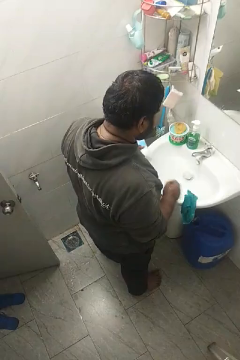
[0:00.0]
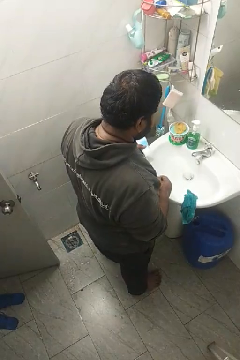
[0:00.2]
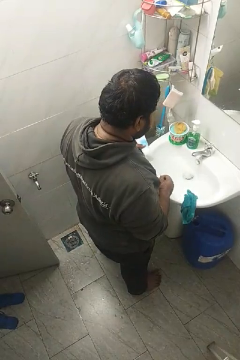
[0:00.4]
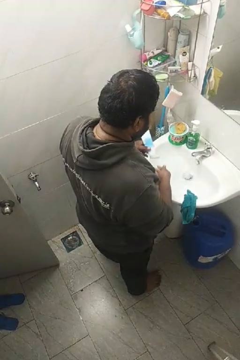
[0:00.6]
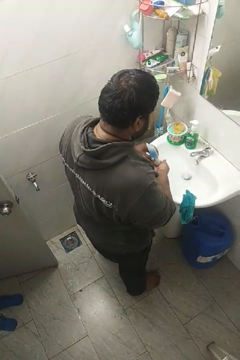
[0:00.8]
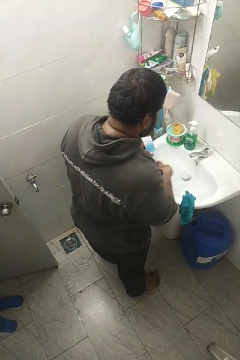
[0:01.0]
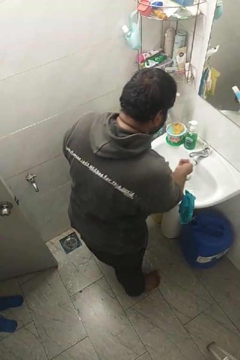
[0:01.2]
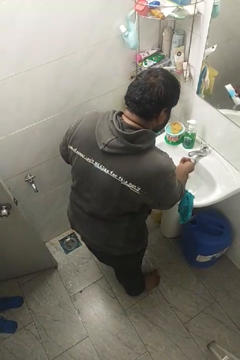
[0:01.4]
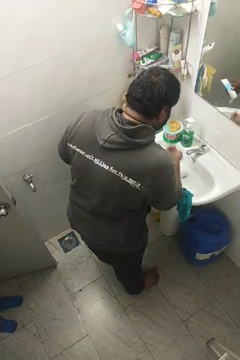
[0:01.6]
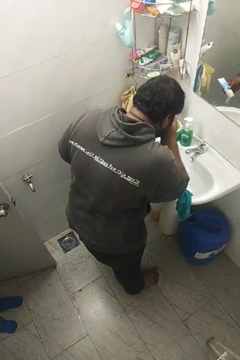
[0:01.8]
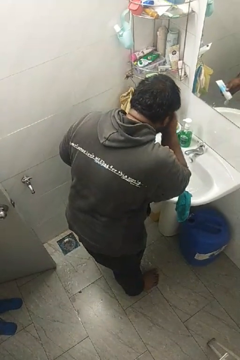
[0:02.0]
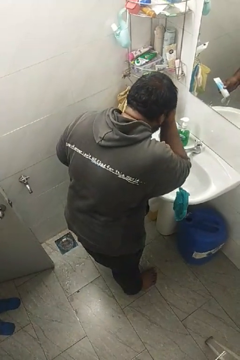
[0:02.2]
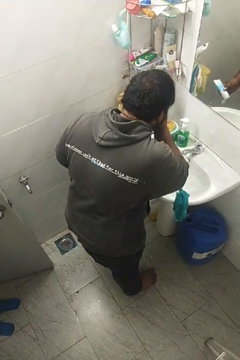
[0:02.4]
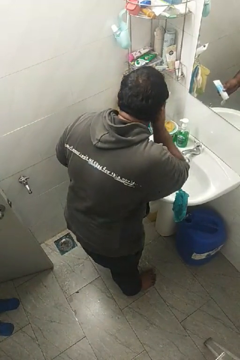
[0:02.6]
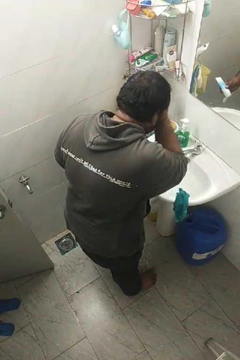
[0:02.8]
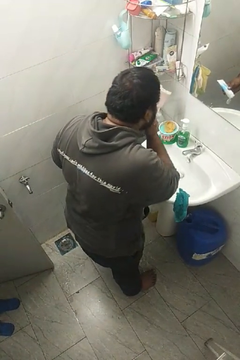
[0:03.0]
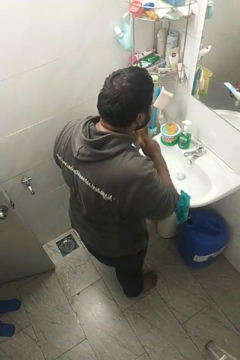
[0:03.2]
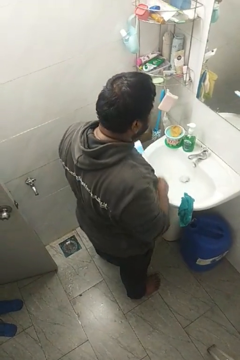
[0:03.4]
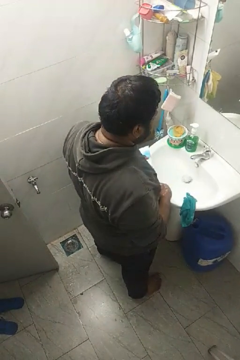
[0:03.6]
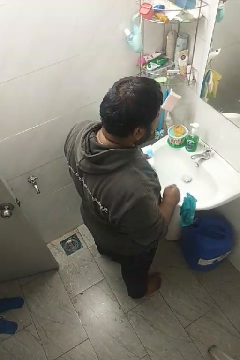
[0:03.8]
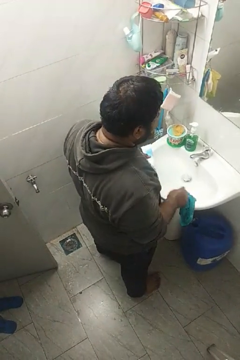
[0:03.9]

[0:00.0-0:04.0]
person washes face

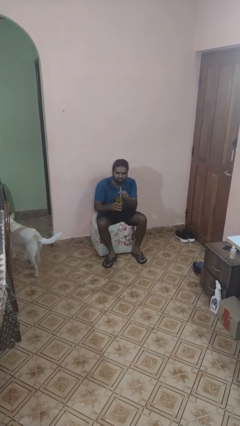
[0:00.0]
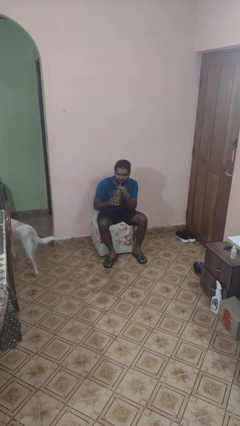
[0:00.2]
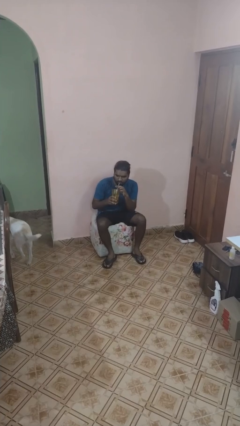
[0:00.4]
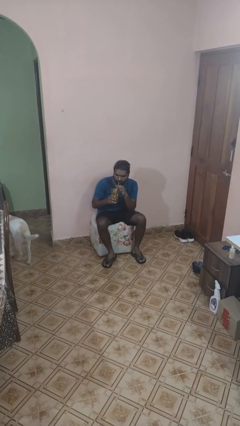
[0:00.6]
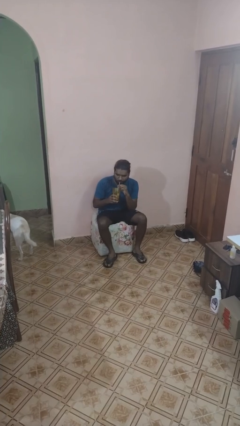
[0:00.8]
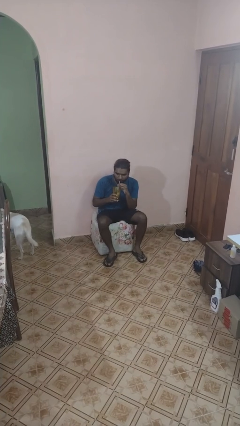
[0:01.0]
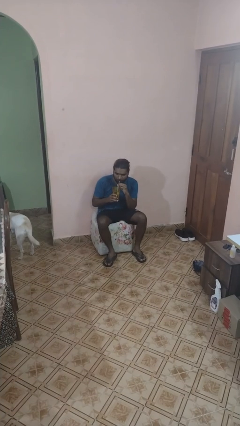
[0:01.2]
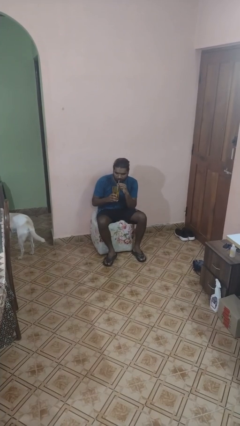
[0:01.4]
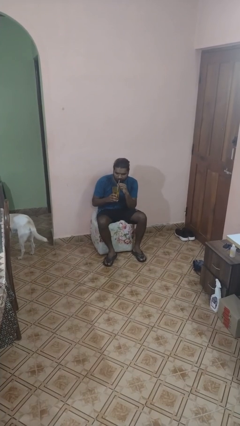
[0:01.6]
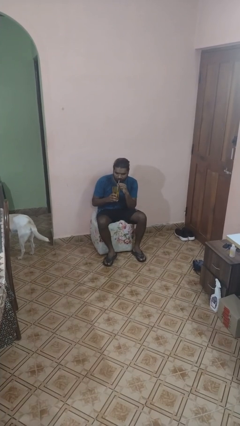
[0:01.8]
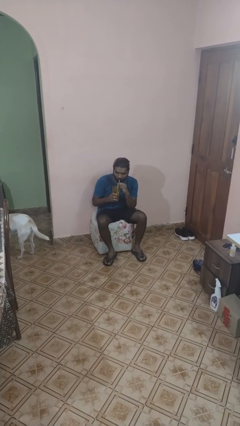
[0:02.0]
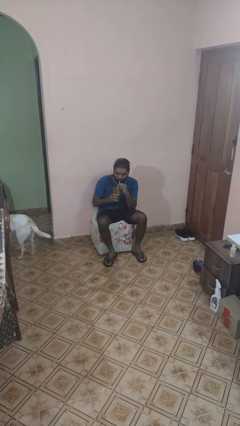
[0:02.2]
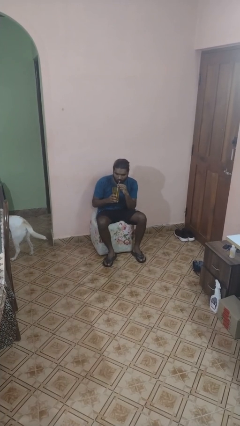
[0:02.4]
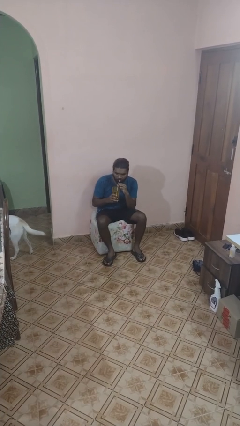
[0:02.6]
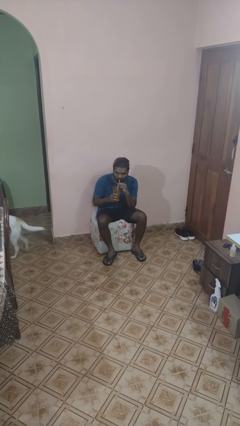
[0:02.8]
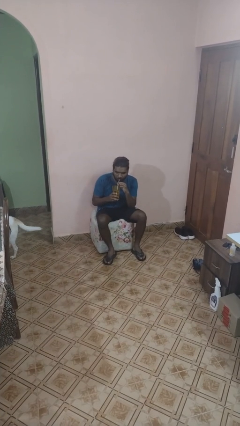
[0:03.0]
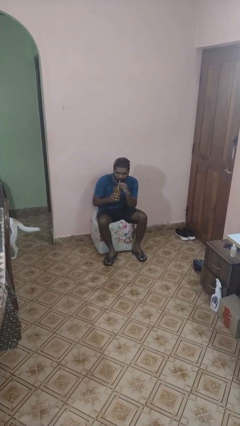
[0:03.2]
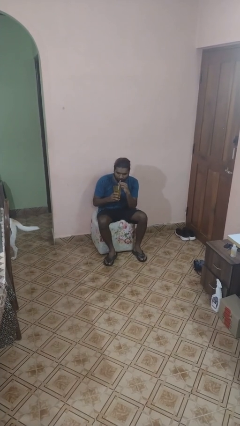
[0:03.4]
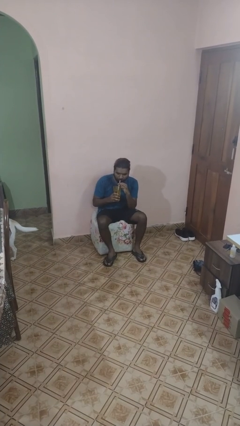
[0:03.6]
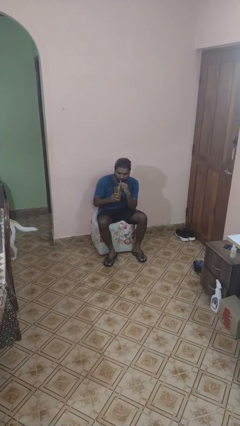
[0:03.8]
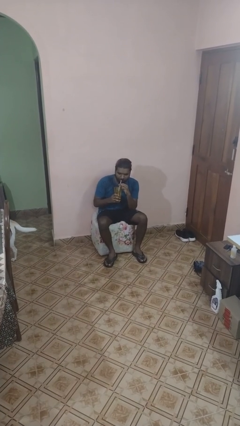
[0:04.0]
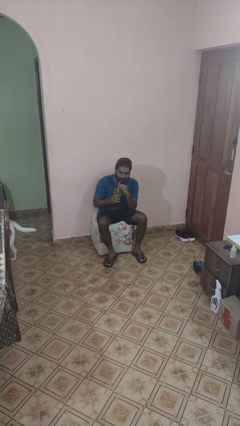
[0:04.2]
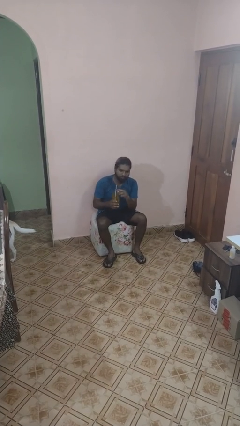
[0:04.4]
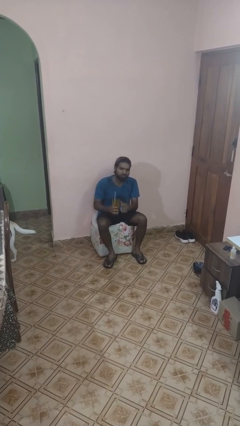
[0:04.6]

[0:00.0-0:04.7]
person drinks from straw

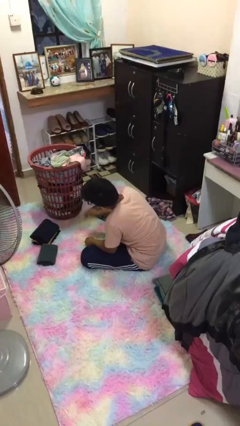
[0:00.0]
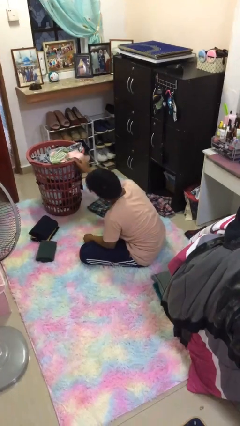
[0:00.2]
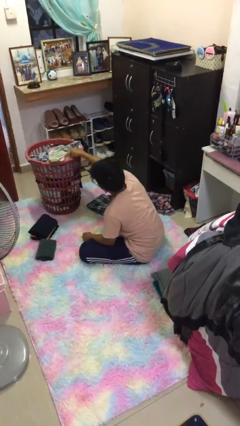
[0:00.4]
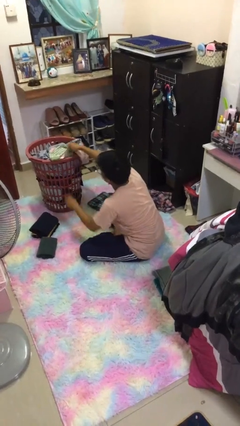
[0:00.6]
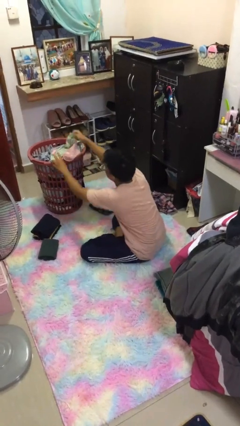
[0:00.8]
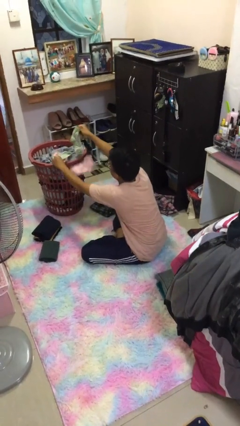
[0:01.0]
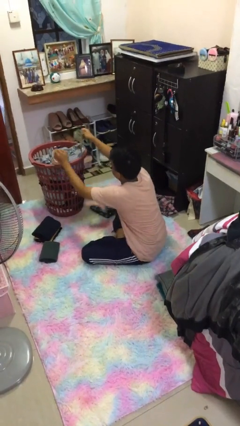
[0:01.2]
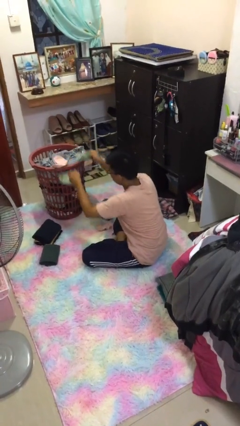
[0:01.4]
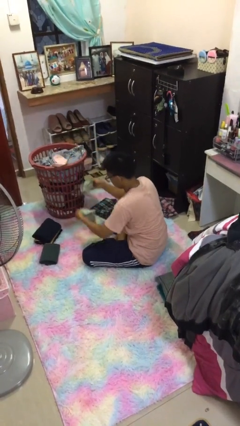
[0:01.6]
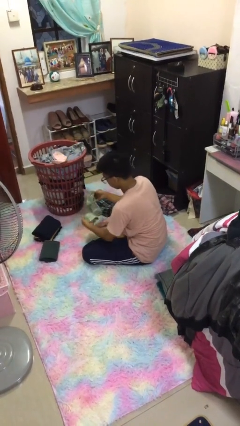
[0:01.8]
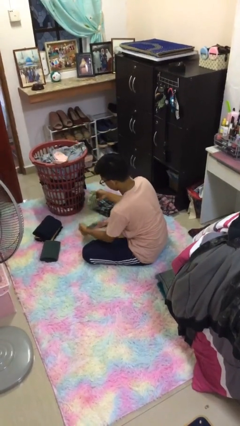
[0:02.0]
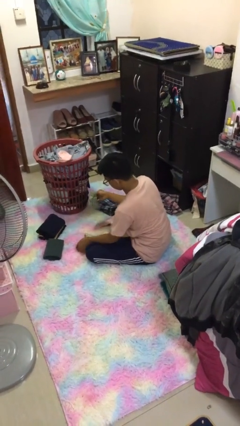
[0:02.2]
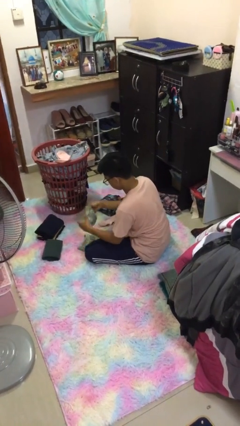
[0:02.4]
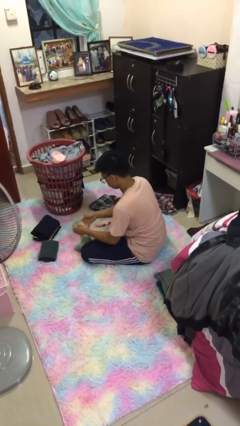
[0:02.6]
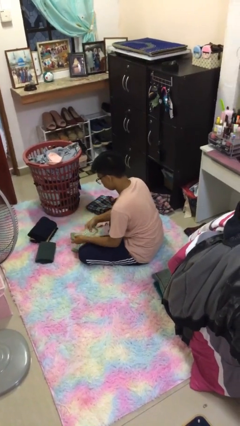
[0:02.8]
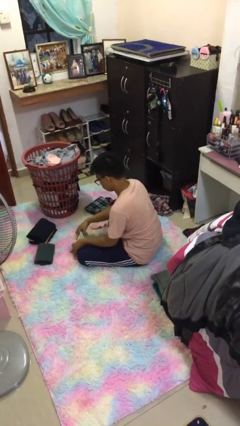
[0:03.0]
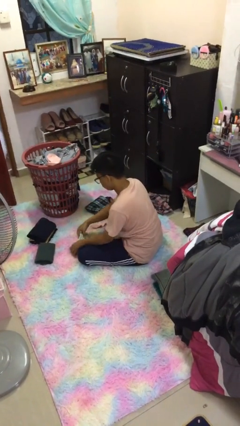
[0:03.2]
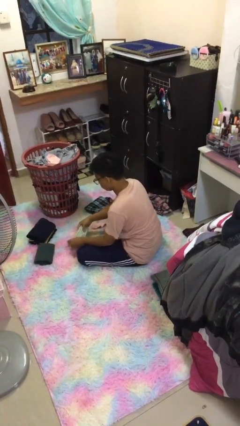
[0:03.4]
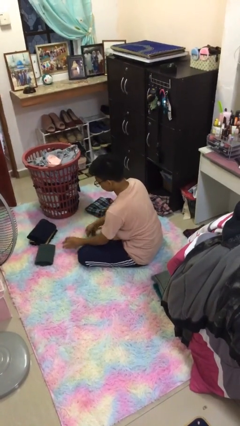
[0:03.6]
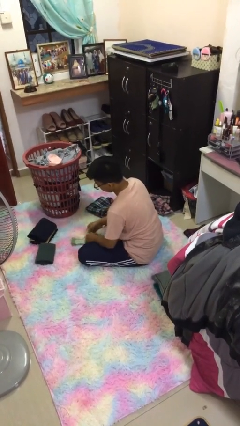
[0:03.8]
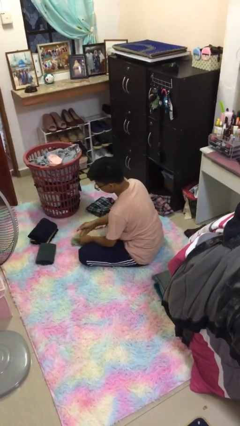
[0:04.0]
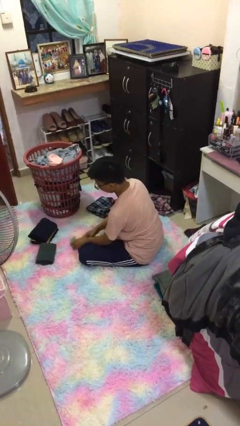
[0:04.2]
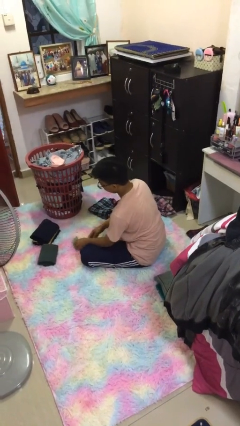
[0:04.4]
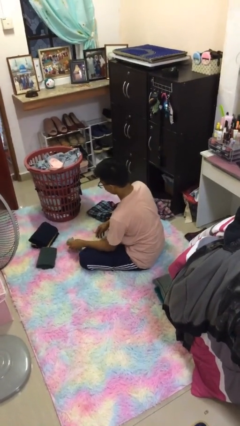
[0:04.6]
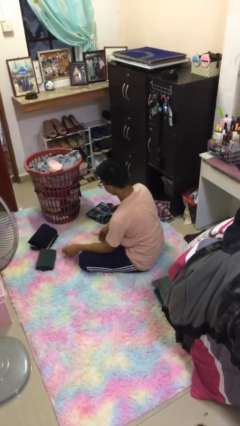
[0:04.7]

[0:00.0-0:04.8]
person folds socks

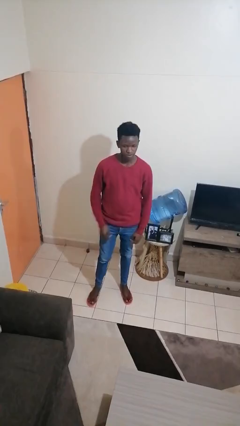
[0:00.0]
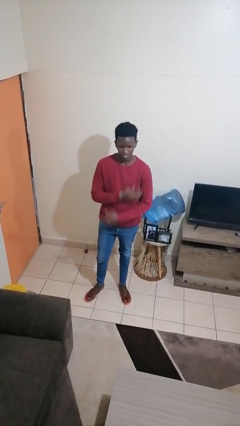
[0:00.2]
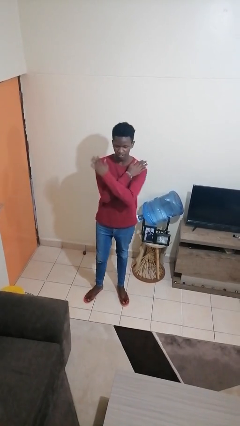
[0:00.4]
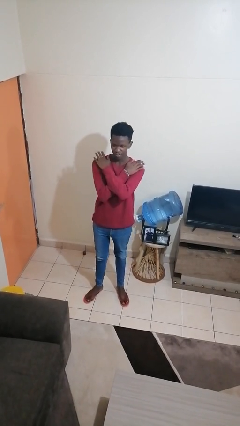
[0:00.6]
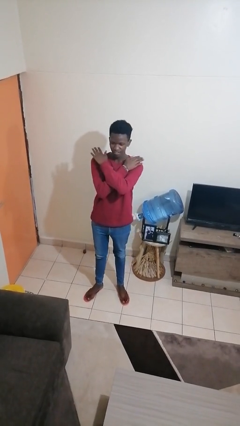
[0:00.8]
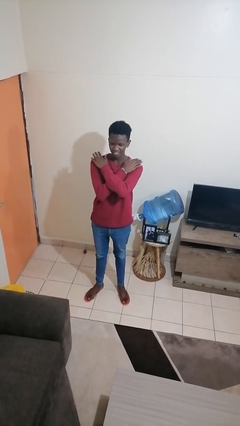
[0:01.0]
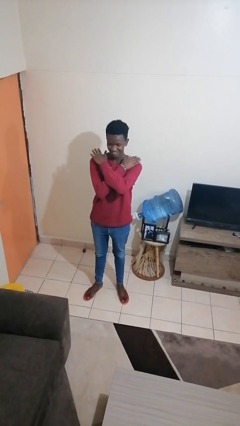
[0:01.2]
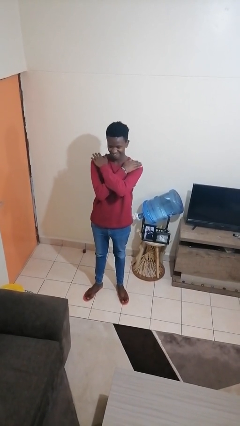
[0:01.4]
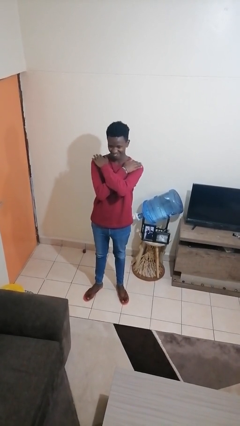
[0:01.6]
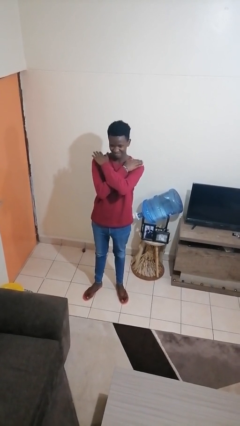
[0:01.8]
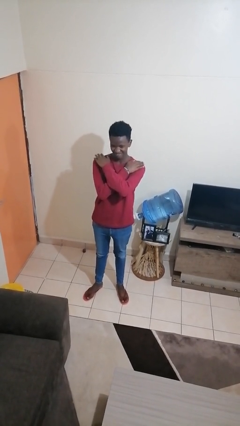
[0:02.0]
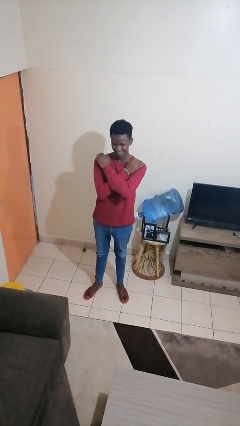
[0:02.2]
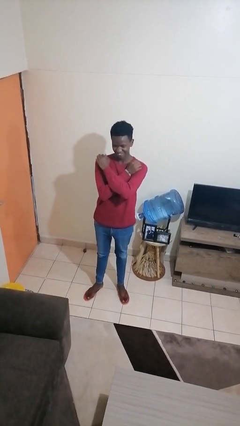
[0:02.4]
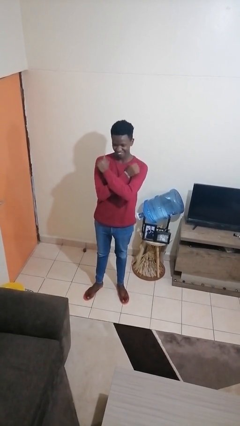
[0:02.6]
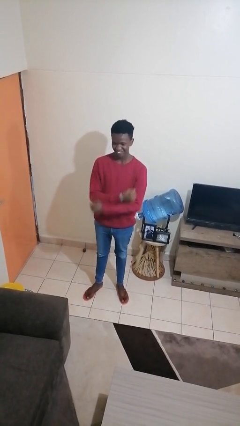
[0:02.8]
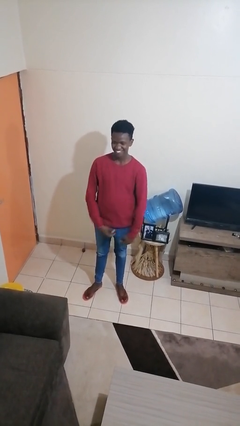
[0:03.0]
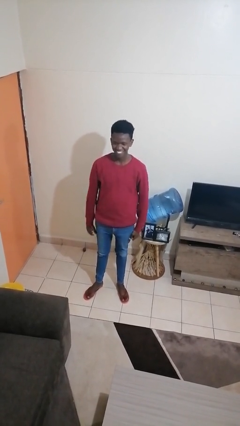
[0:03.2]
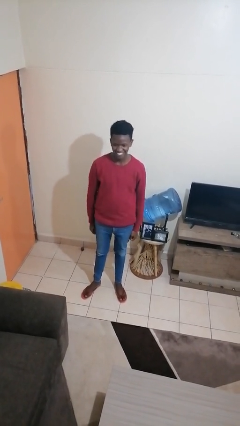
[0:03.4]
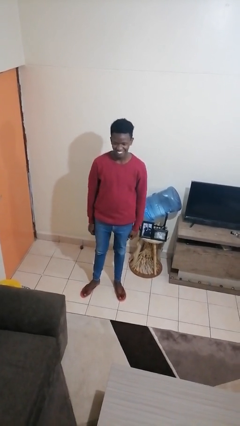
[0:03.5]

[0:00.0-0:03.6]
person gestures arms x

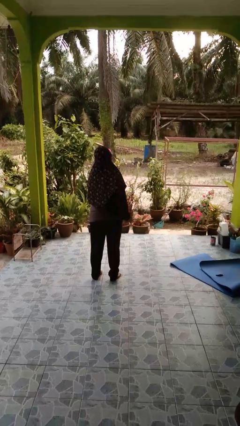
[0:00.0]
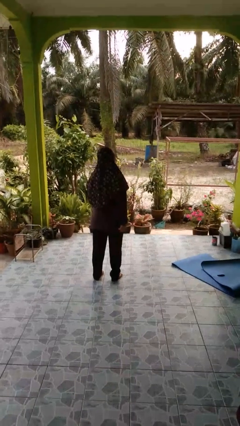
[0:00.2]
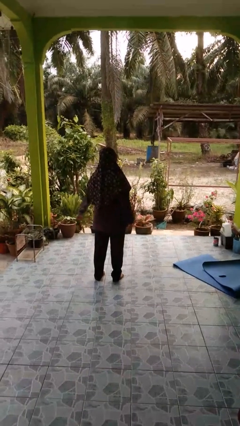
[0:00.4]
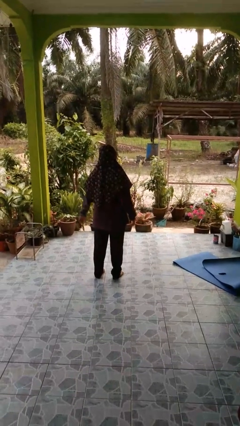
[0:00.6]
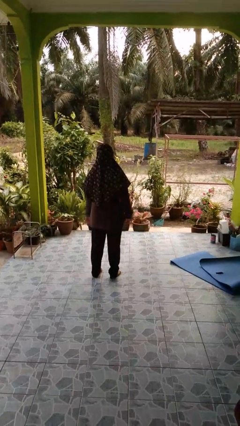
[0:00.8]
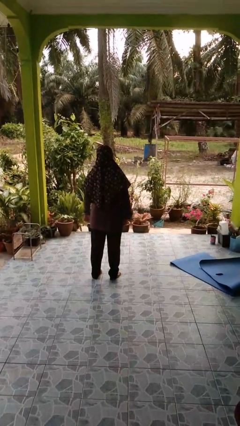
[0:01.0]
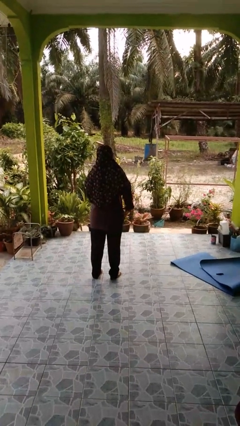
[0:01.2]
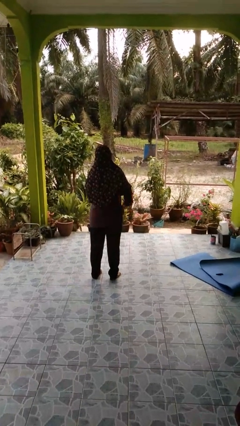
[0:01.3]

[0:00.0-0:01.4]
person untucks shirt
